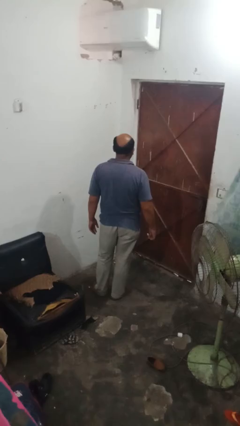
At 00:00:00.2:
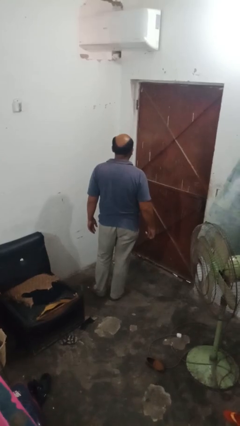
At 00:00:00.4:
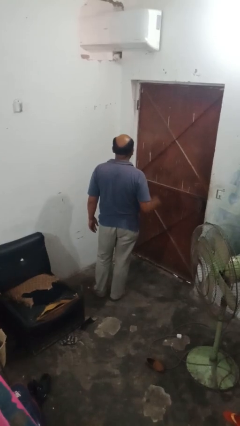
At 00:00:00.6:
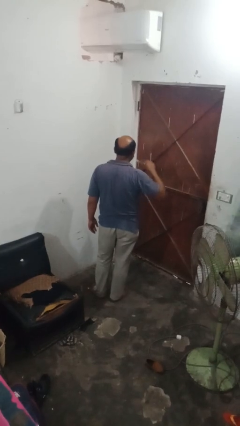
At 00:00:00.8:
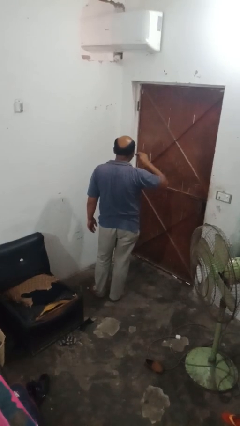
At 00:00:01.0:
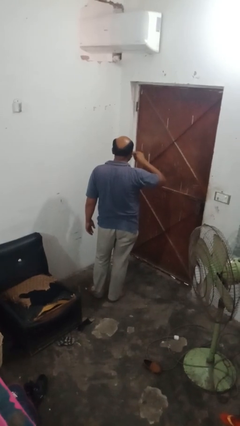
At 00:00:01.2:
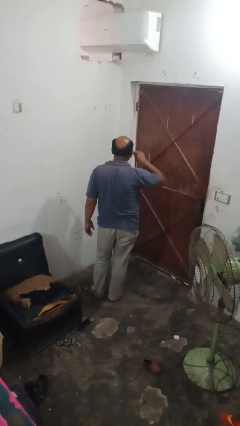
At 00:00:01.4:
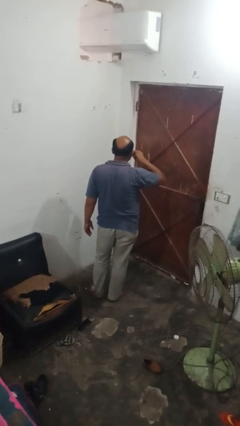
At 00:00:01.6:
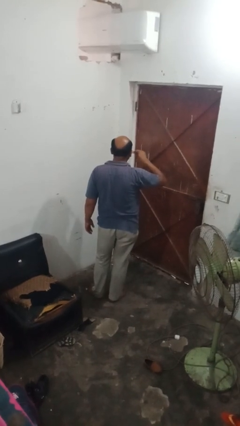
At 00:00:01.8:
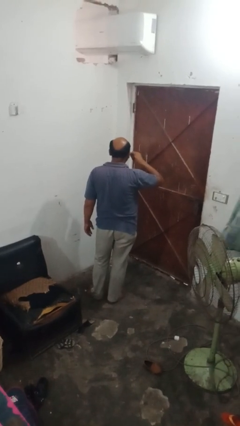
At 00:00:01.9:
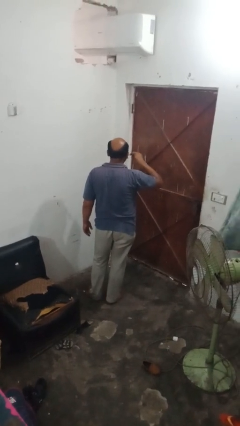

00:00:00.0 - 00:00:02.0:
person brushes teeth

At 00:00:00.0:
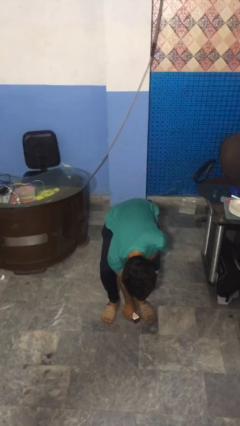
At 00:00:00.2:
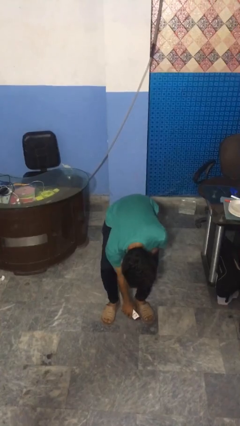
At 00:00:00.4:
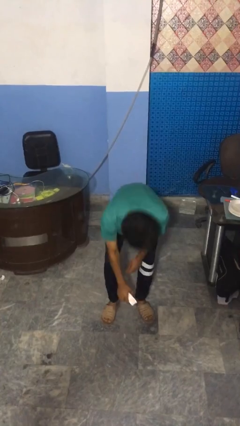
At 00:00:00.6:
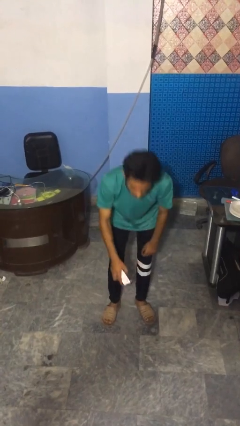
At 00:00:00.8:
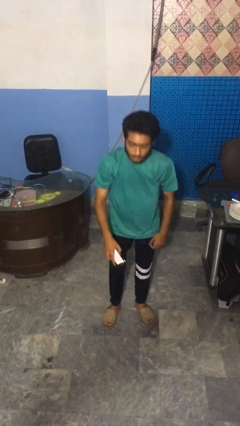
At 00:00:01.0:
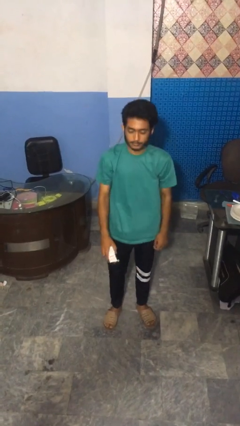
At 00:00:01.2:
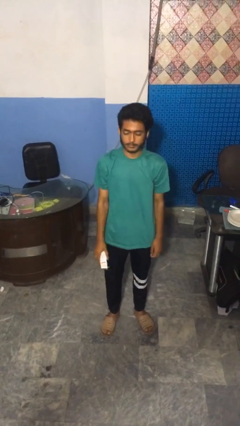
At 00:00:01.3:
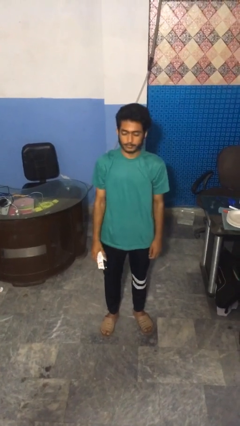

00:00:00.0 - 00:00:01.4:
person picks up object from floor

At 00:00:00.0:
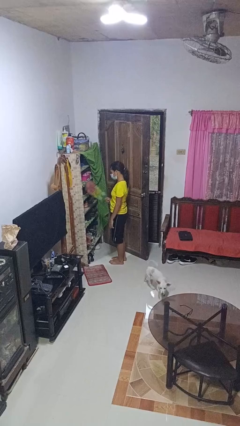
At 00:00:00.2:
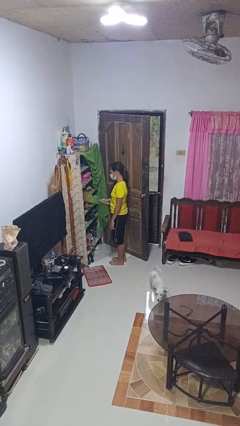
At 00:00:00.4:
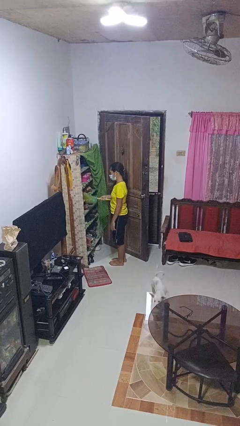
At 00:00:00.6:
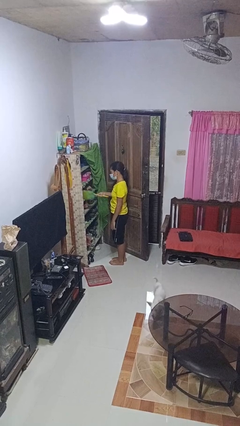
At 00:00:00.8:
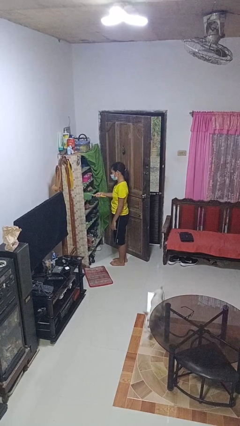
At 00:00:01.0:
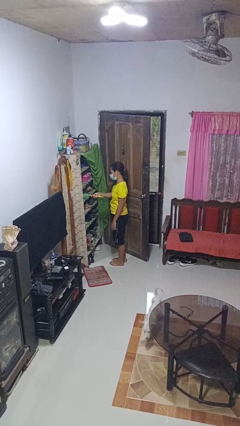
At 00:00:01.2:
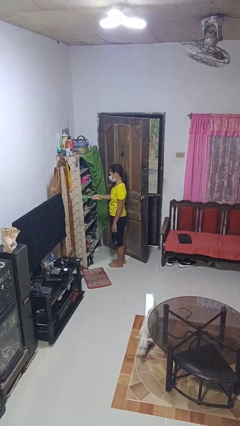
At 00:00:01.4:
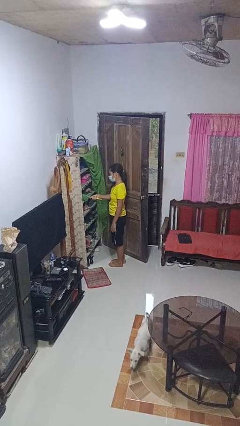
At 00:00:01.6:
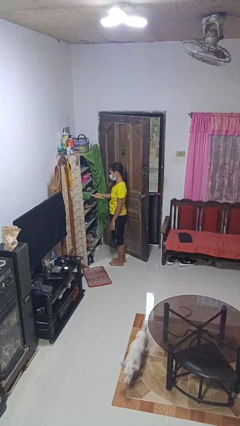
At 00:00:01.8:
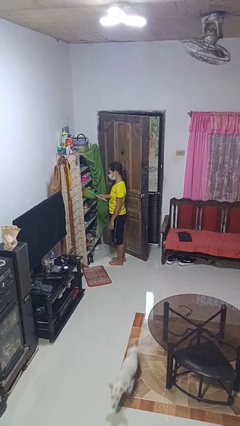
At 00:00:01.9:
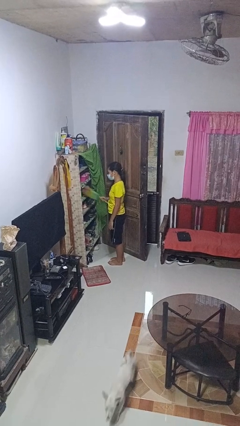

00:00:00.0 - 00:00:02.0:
person dusts furniture

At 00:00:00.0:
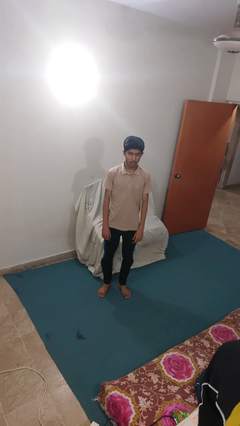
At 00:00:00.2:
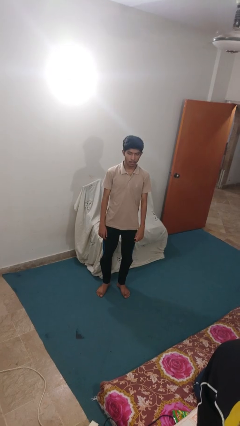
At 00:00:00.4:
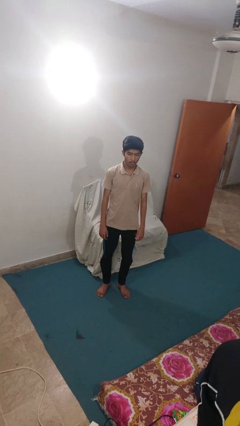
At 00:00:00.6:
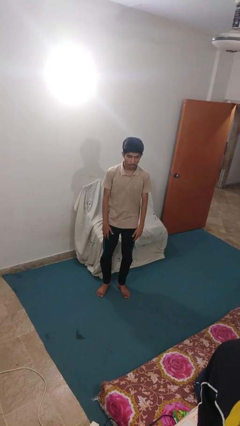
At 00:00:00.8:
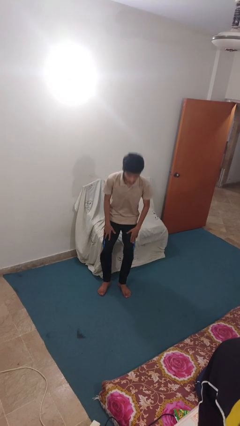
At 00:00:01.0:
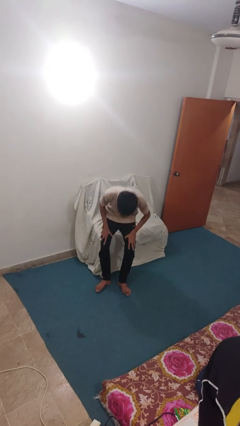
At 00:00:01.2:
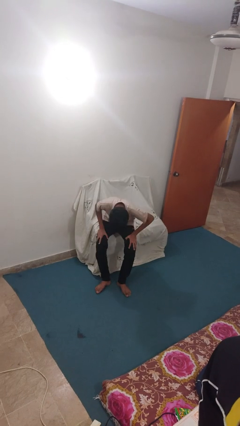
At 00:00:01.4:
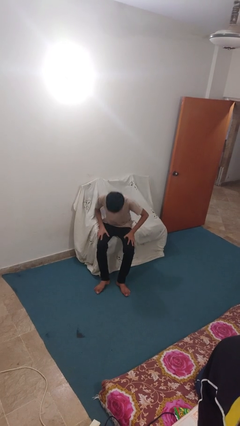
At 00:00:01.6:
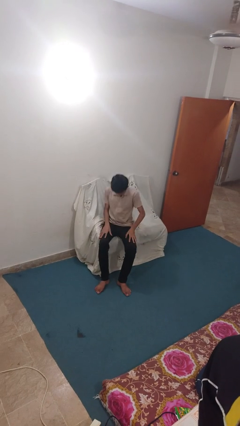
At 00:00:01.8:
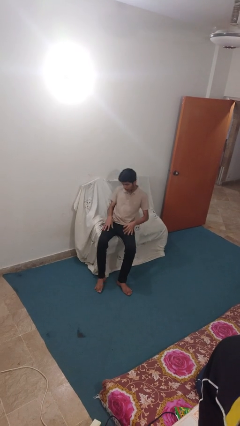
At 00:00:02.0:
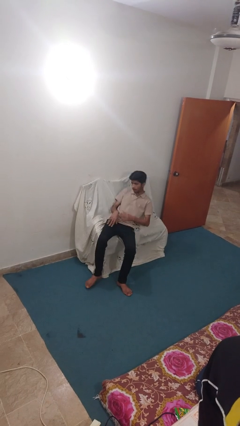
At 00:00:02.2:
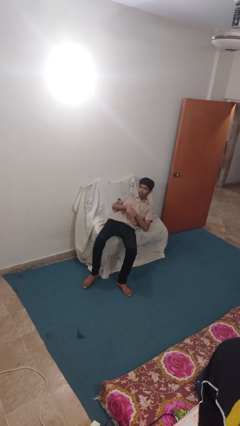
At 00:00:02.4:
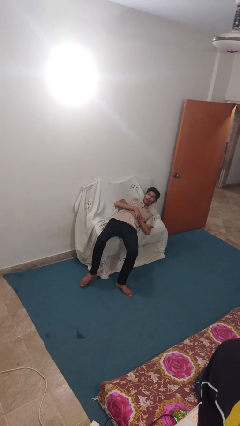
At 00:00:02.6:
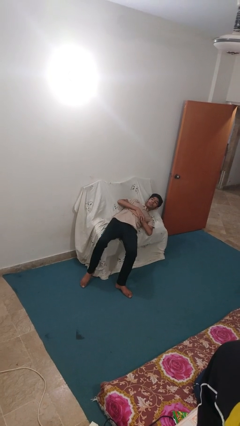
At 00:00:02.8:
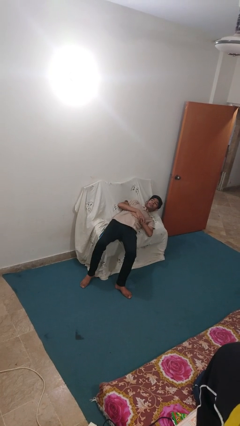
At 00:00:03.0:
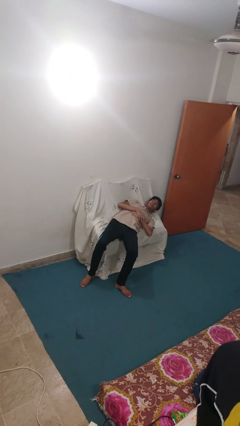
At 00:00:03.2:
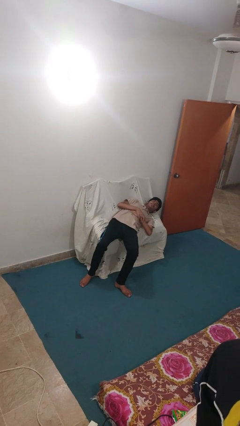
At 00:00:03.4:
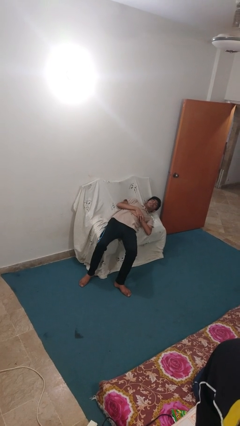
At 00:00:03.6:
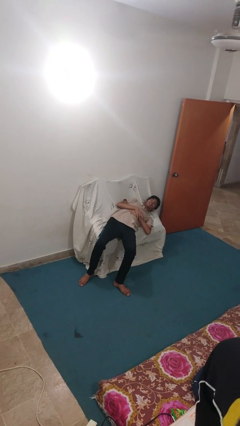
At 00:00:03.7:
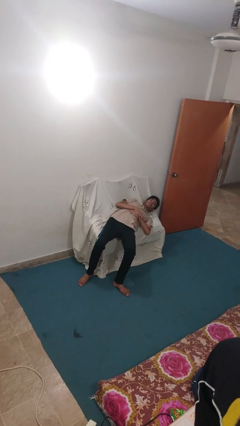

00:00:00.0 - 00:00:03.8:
person lies down on couch

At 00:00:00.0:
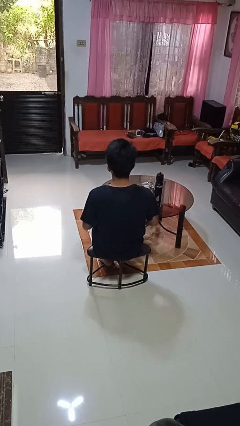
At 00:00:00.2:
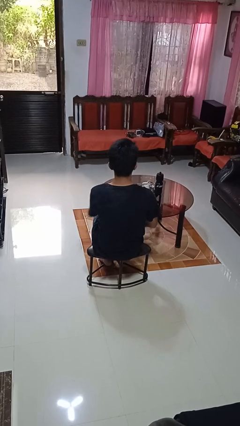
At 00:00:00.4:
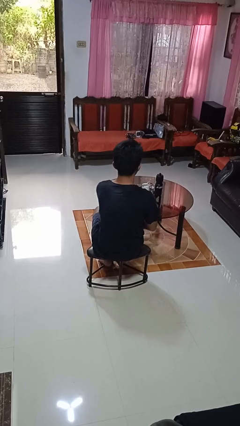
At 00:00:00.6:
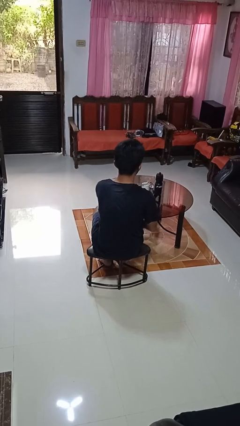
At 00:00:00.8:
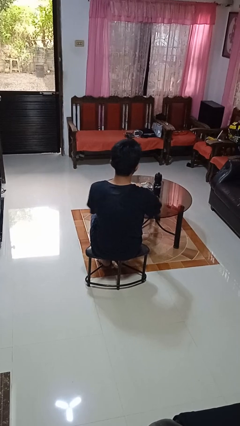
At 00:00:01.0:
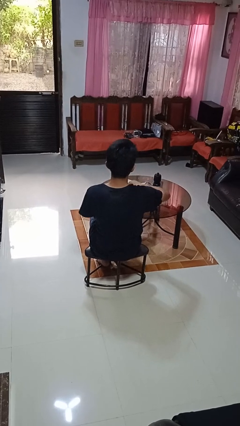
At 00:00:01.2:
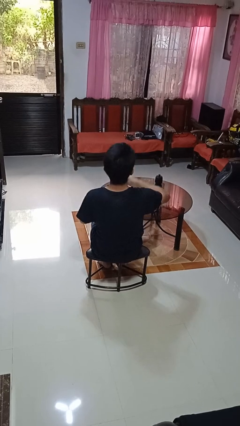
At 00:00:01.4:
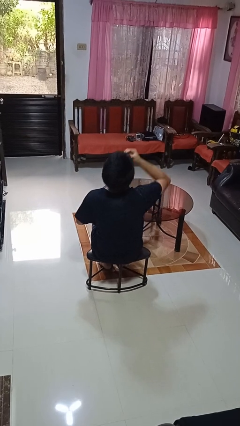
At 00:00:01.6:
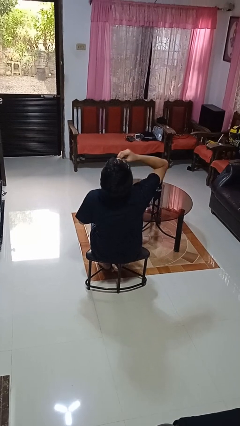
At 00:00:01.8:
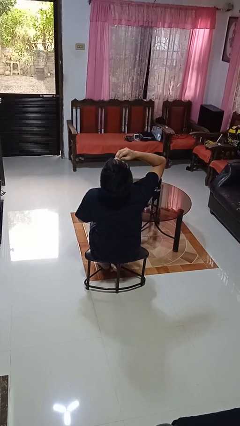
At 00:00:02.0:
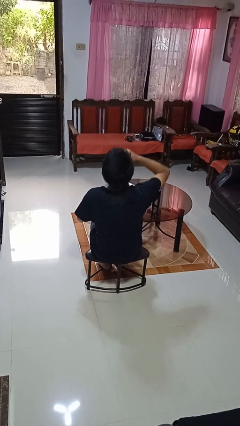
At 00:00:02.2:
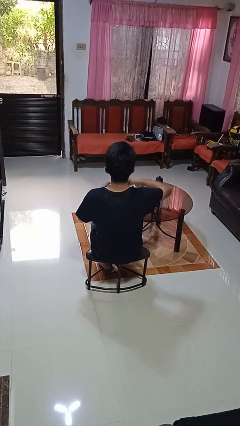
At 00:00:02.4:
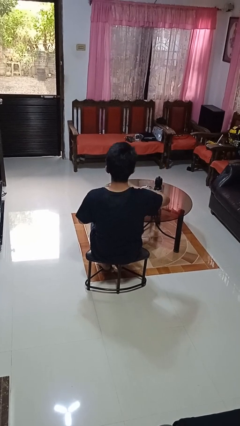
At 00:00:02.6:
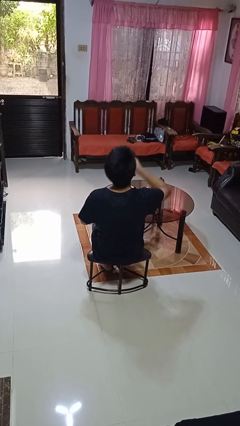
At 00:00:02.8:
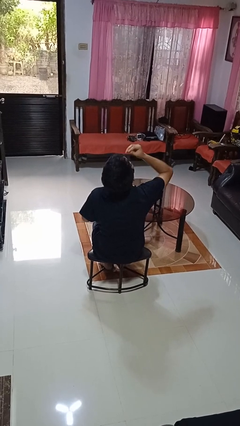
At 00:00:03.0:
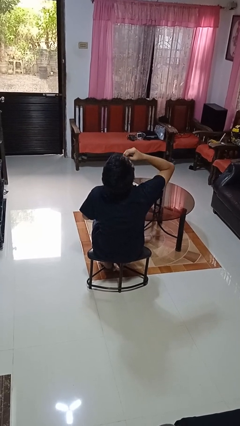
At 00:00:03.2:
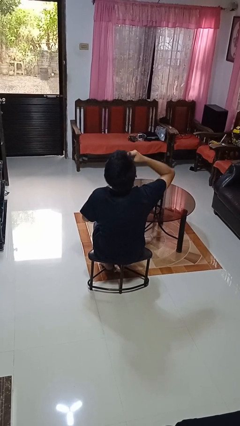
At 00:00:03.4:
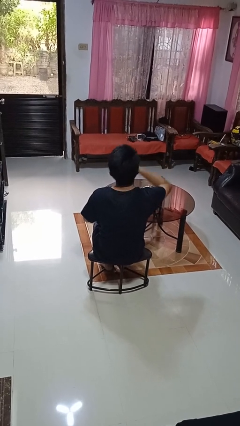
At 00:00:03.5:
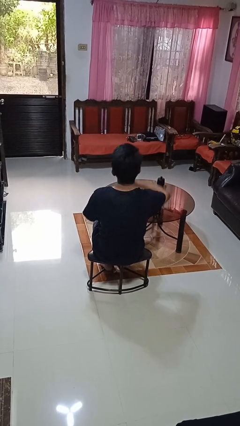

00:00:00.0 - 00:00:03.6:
person eats with hands

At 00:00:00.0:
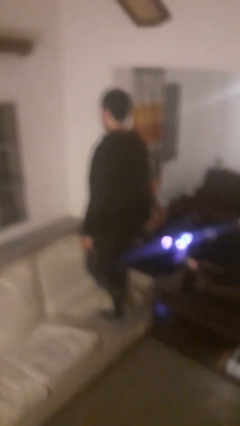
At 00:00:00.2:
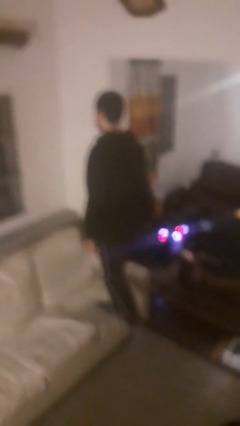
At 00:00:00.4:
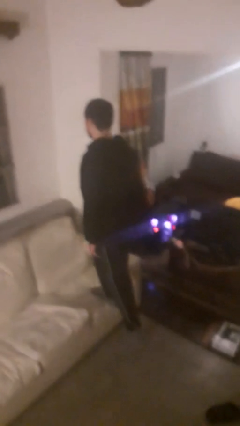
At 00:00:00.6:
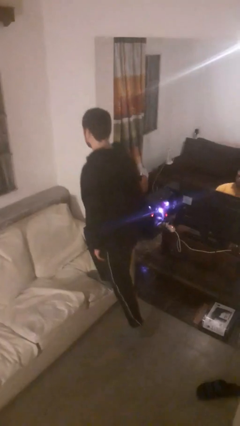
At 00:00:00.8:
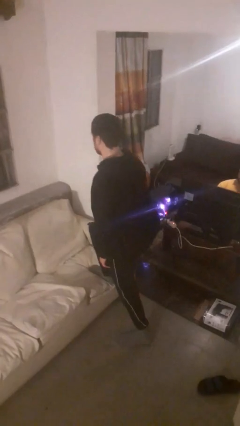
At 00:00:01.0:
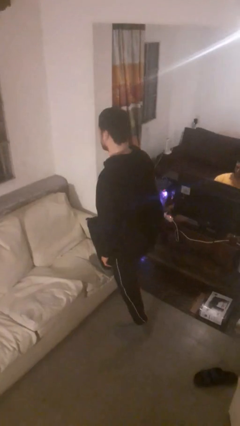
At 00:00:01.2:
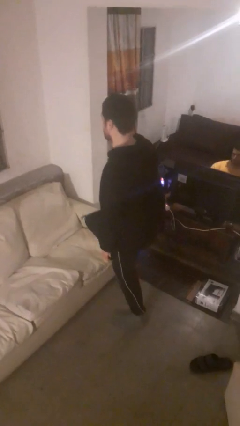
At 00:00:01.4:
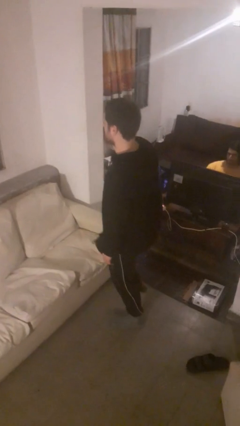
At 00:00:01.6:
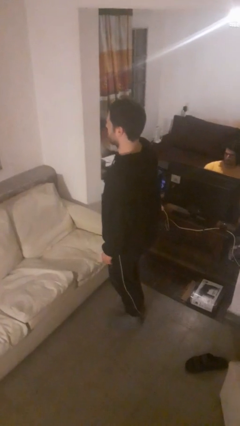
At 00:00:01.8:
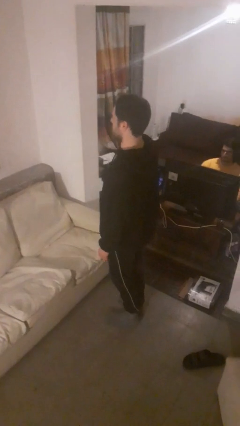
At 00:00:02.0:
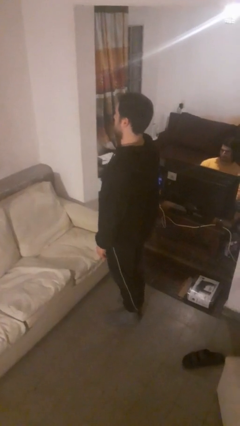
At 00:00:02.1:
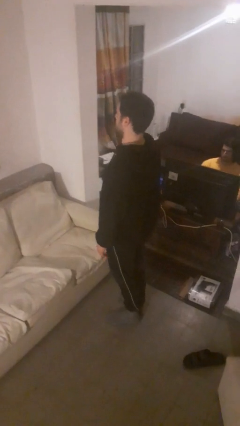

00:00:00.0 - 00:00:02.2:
person climbs off couch

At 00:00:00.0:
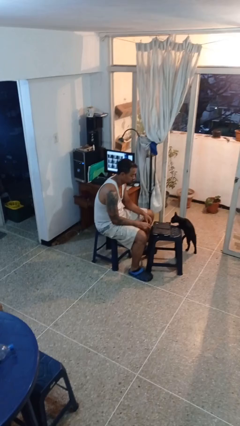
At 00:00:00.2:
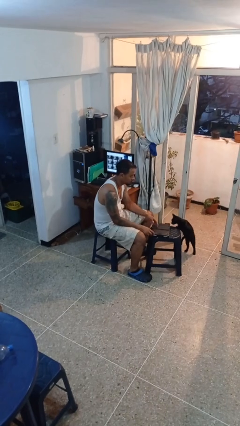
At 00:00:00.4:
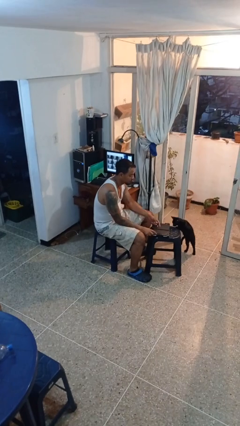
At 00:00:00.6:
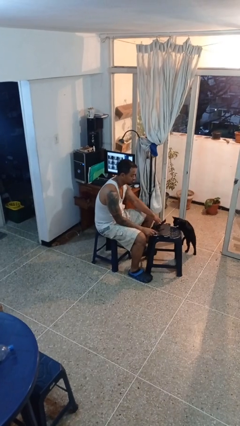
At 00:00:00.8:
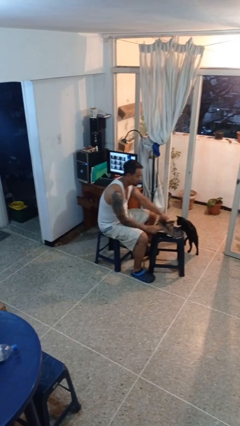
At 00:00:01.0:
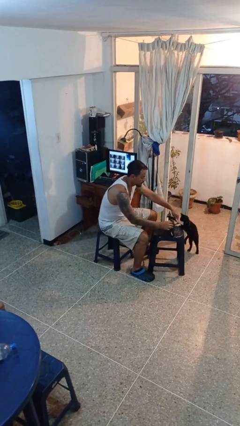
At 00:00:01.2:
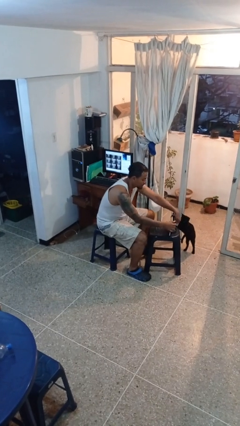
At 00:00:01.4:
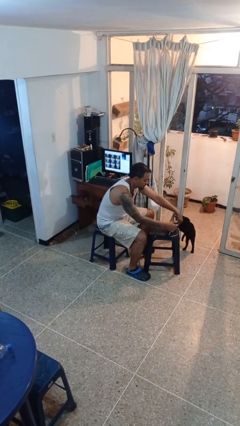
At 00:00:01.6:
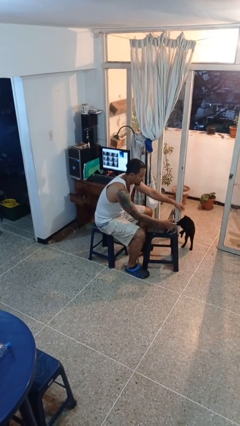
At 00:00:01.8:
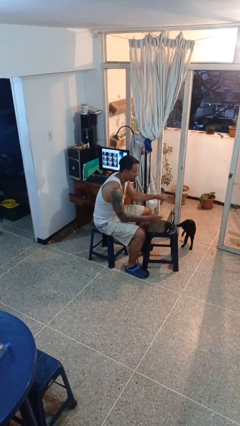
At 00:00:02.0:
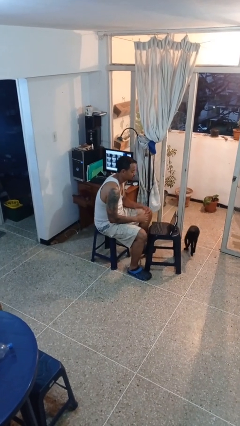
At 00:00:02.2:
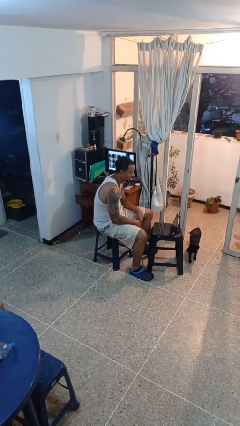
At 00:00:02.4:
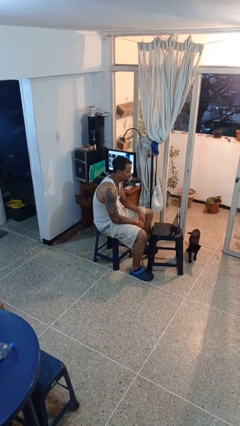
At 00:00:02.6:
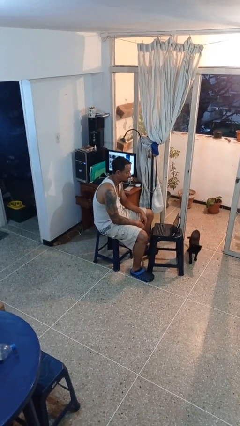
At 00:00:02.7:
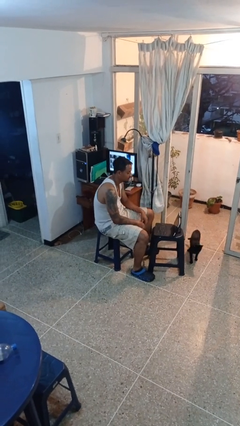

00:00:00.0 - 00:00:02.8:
person opens laptop
